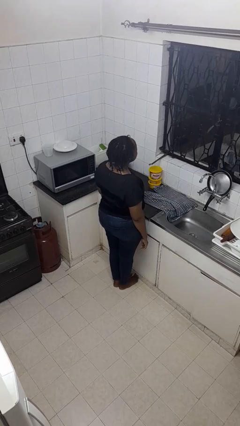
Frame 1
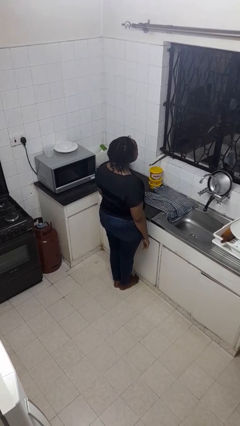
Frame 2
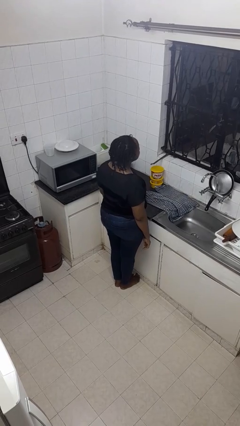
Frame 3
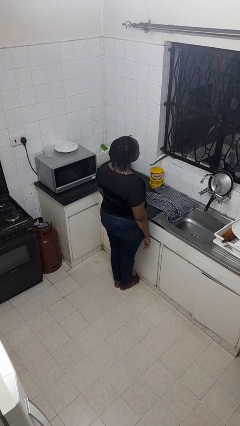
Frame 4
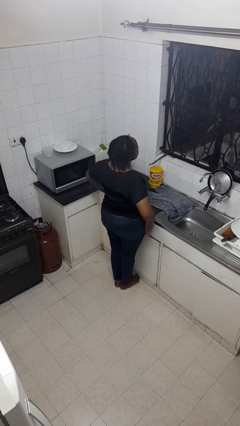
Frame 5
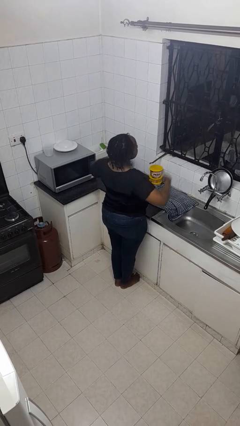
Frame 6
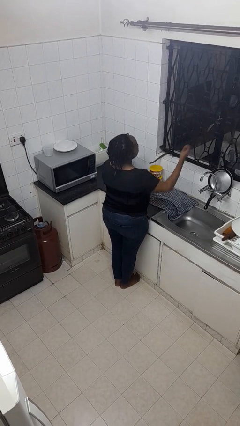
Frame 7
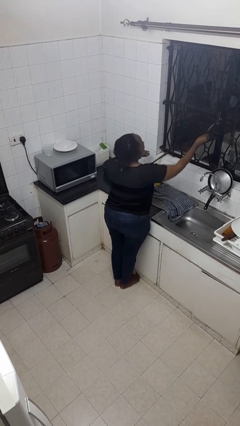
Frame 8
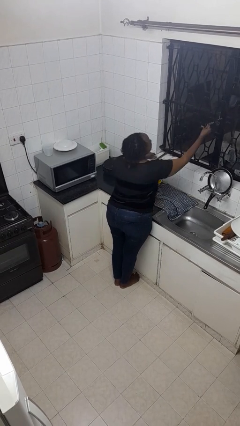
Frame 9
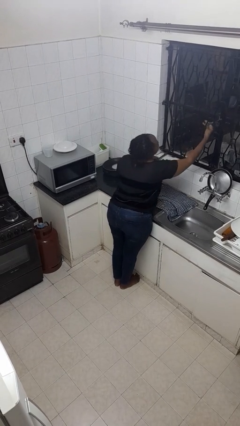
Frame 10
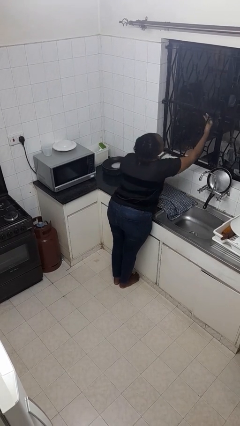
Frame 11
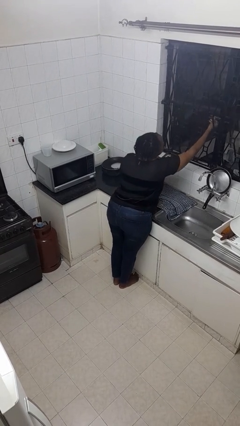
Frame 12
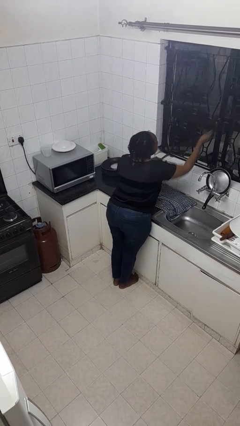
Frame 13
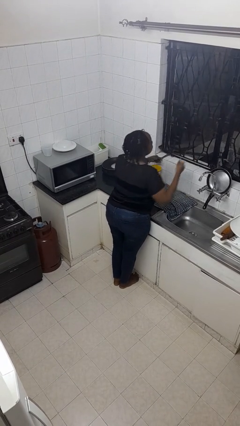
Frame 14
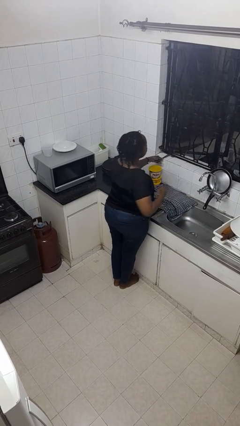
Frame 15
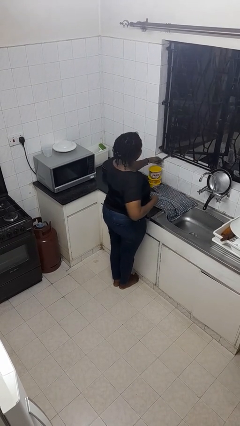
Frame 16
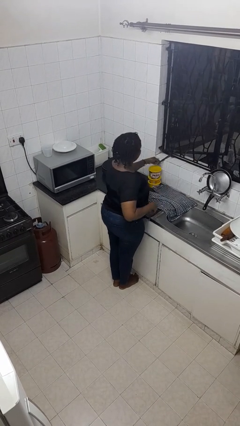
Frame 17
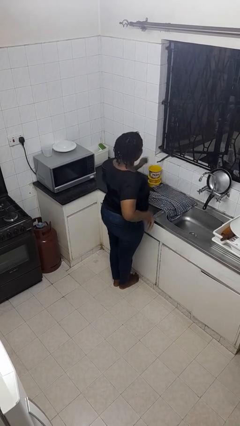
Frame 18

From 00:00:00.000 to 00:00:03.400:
person opens home window

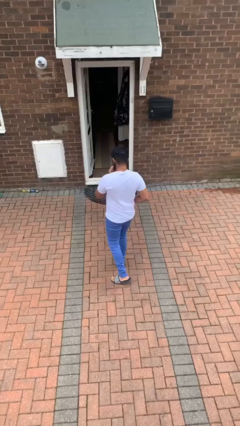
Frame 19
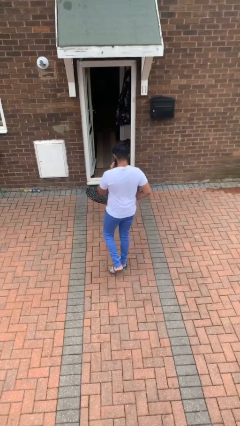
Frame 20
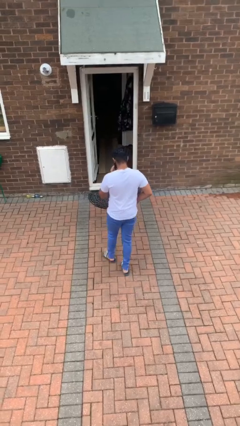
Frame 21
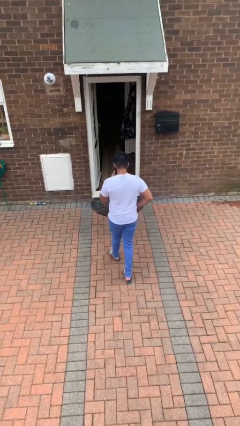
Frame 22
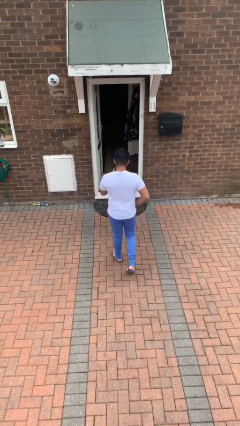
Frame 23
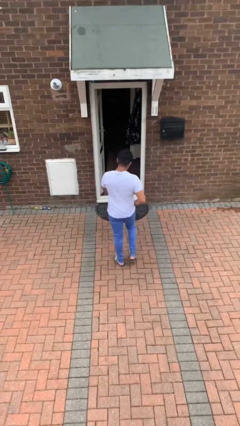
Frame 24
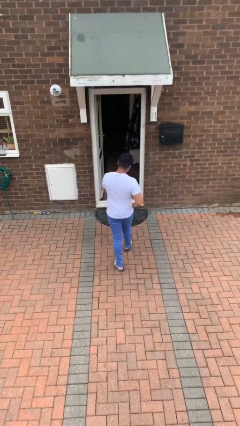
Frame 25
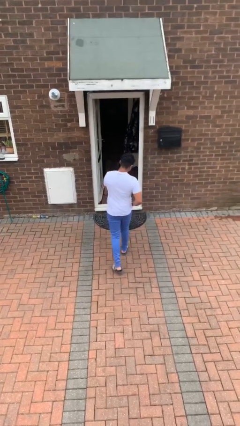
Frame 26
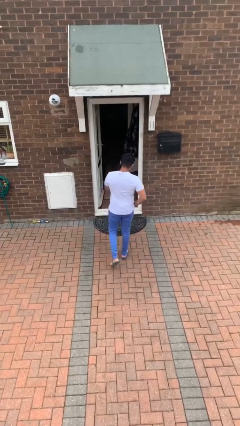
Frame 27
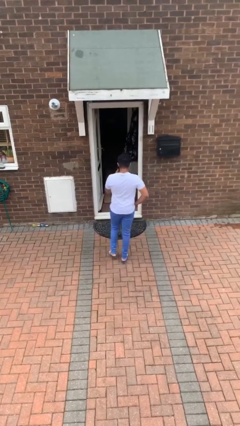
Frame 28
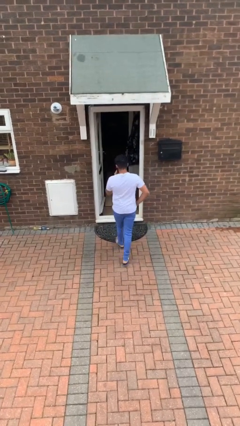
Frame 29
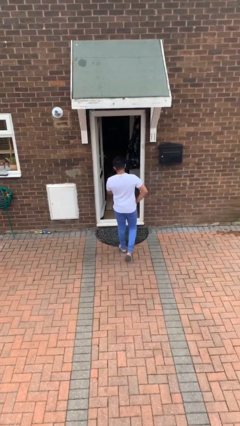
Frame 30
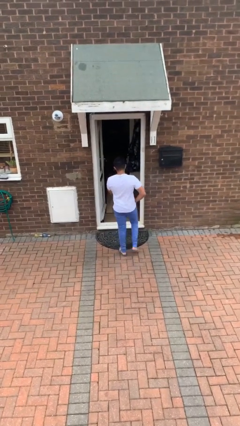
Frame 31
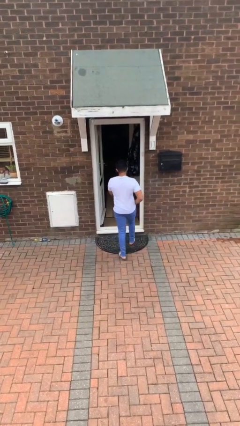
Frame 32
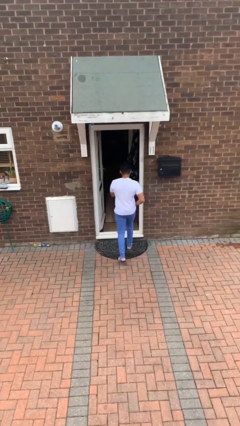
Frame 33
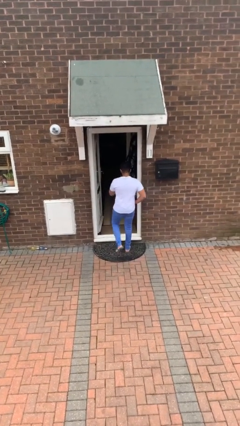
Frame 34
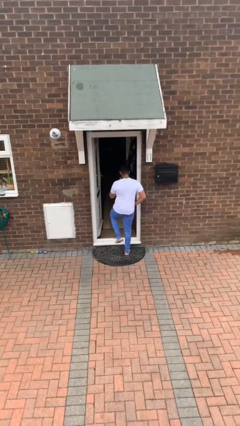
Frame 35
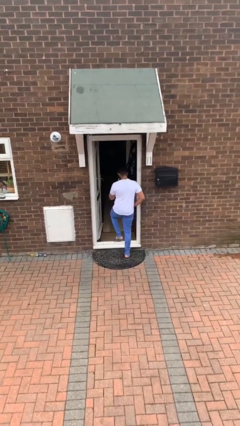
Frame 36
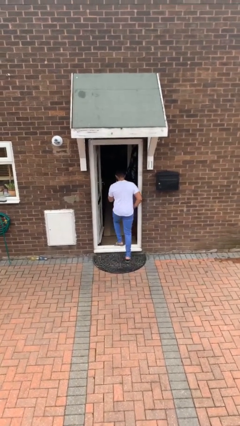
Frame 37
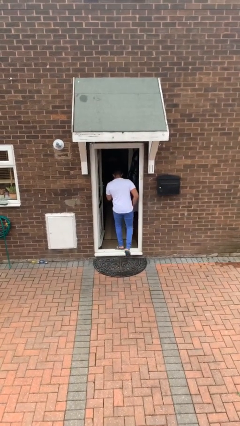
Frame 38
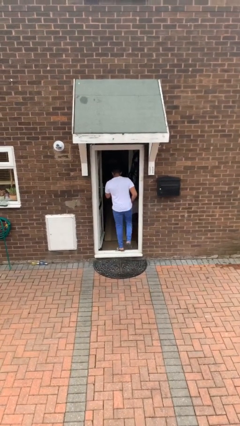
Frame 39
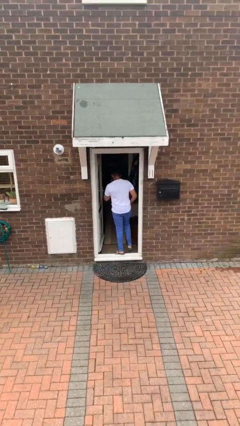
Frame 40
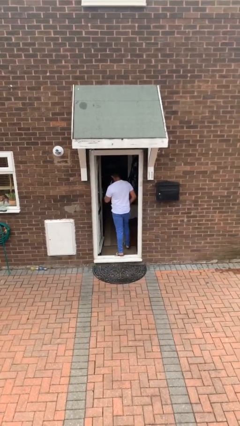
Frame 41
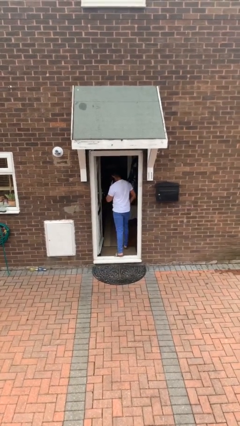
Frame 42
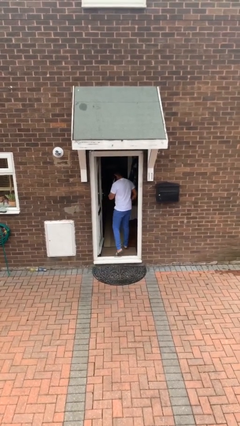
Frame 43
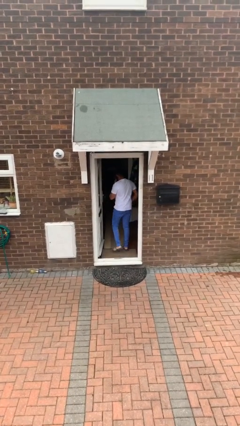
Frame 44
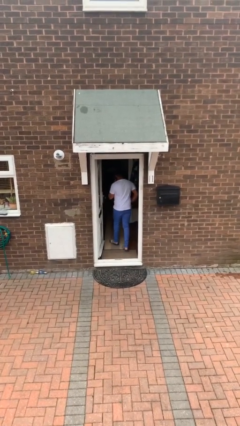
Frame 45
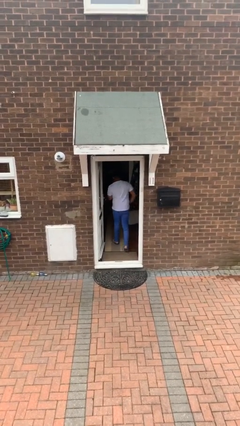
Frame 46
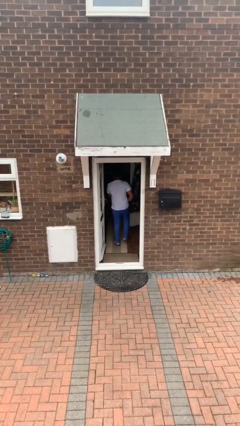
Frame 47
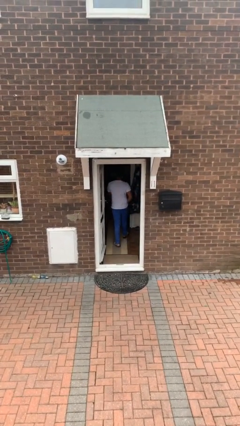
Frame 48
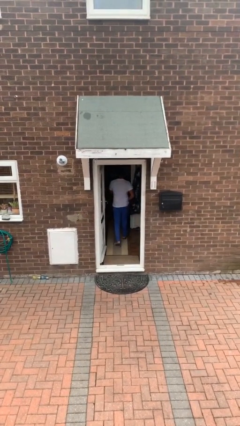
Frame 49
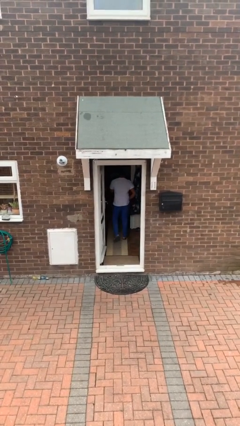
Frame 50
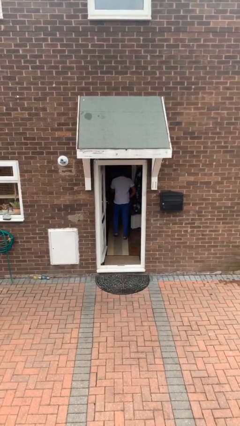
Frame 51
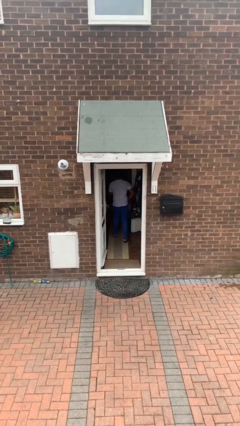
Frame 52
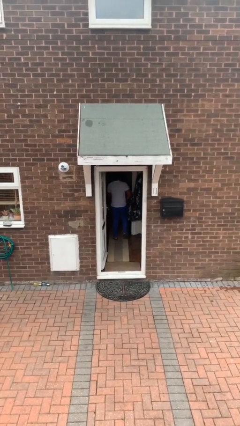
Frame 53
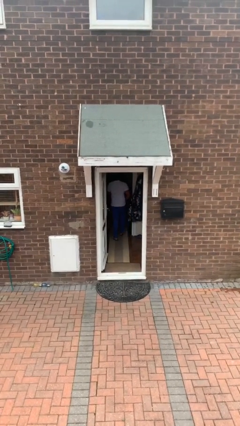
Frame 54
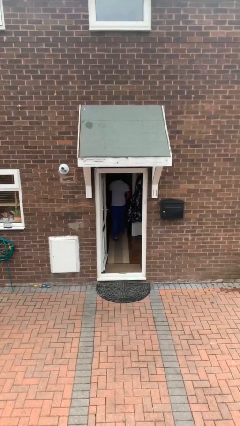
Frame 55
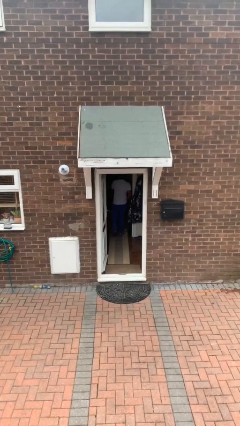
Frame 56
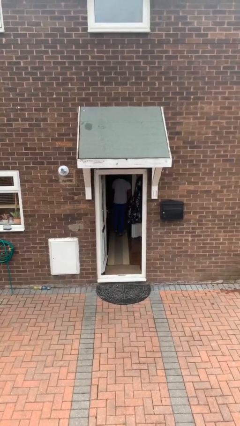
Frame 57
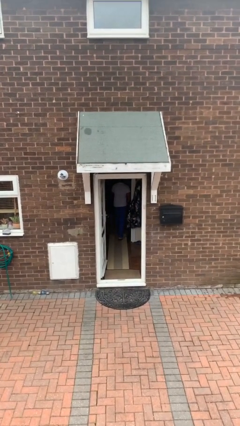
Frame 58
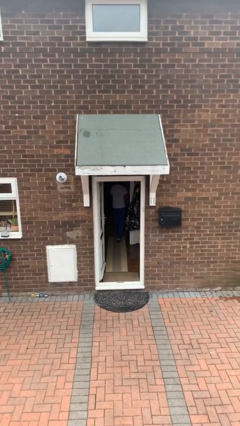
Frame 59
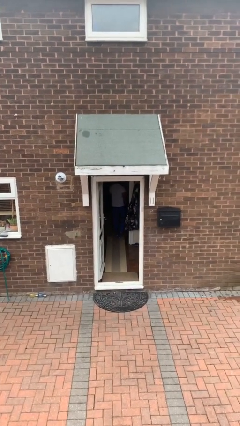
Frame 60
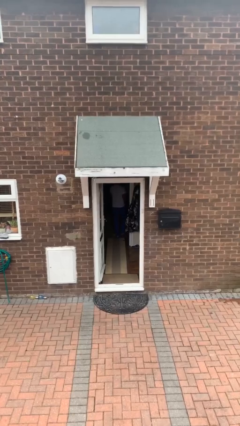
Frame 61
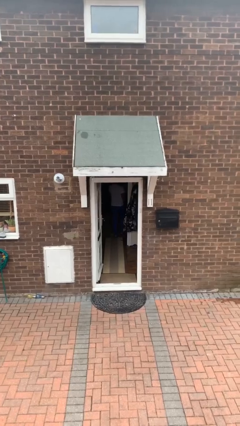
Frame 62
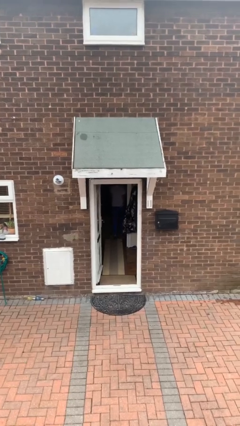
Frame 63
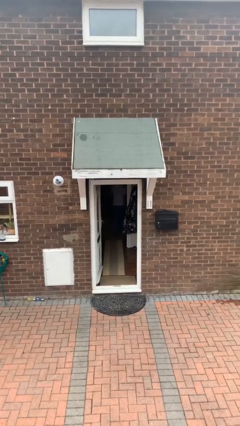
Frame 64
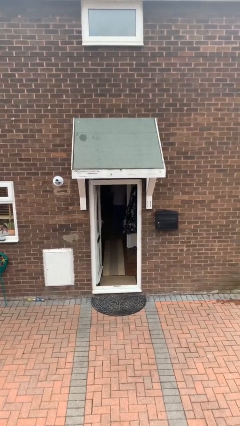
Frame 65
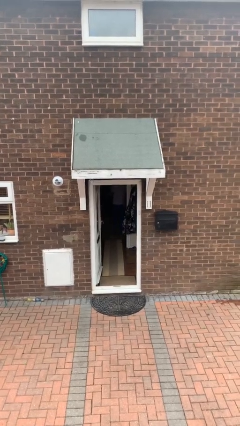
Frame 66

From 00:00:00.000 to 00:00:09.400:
person exits scene through structure

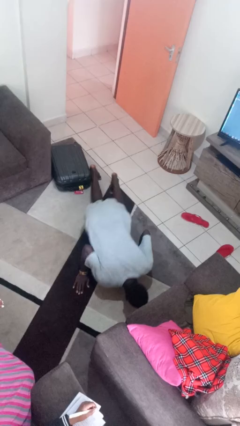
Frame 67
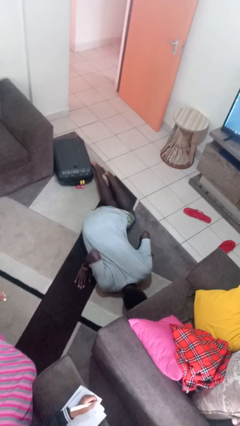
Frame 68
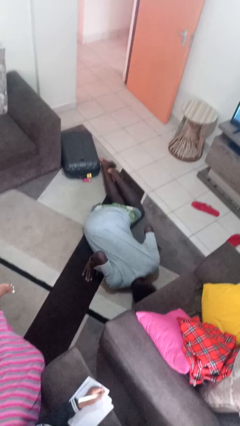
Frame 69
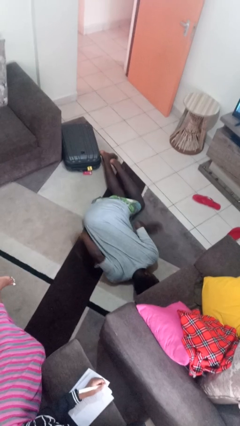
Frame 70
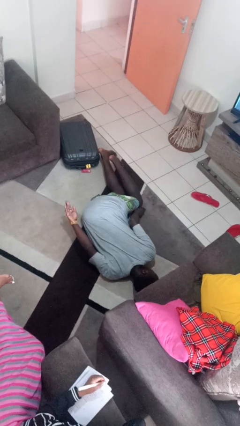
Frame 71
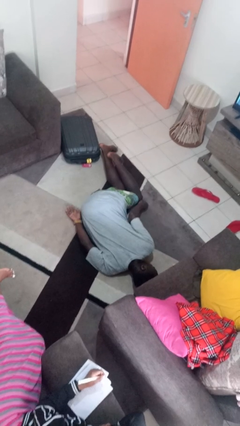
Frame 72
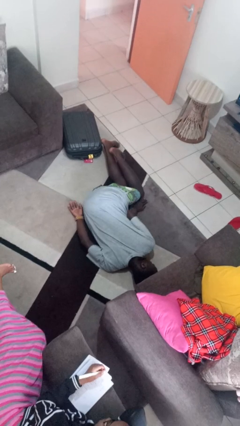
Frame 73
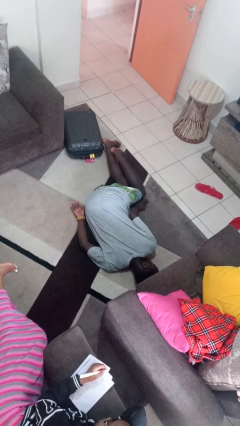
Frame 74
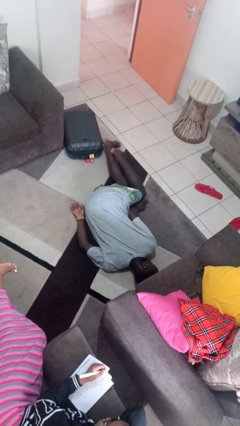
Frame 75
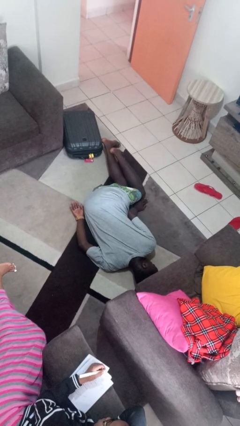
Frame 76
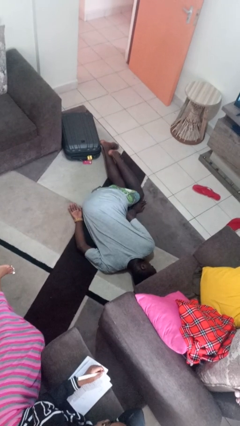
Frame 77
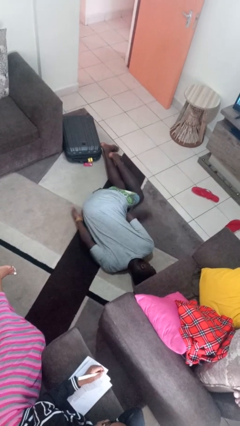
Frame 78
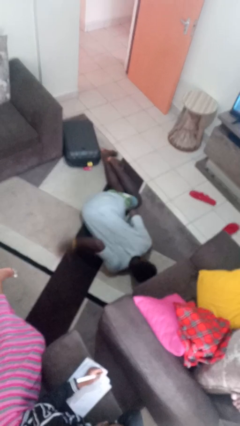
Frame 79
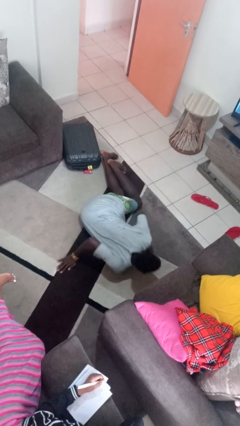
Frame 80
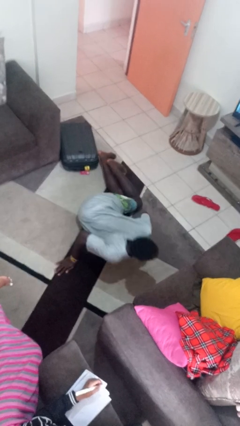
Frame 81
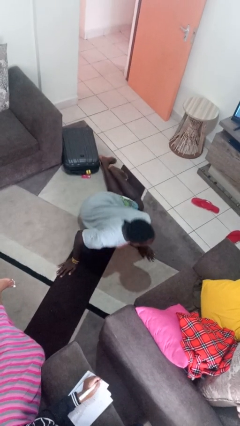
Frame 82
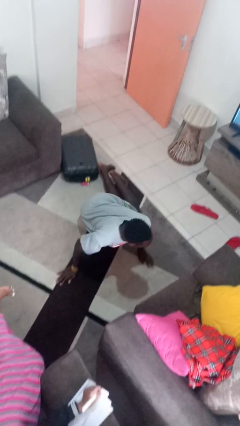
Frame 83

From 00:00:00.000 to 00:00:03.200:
person lies down on floor

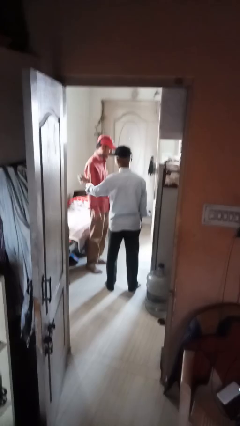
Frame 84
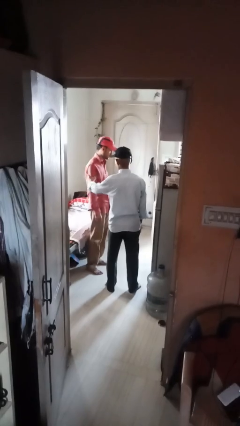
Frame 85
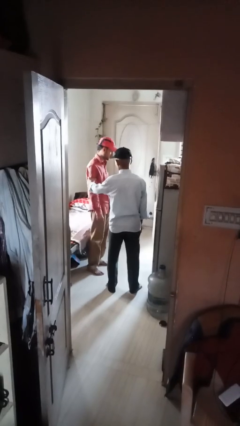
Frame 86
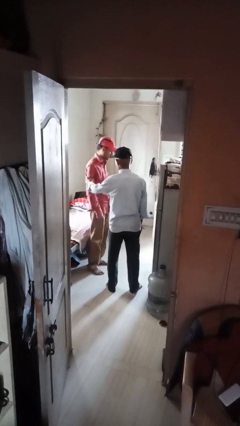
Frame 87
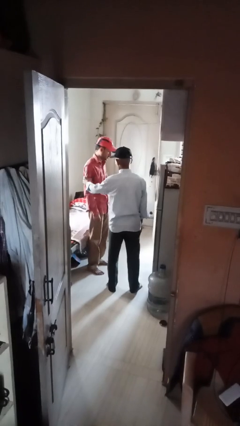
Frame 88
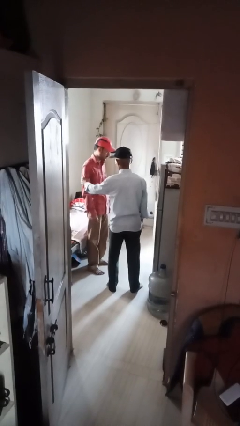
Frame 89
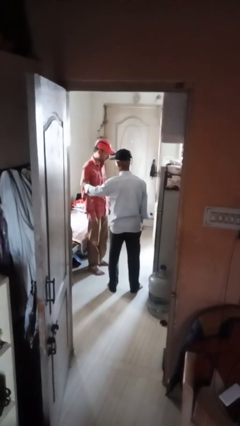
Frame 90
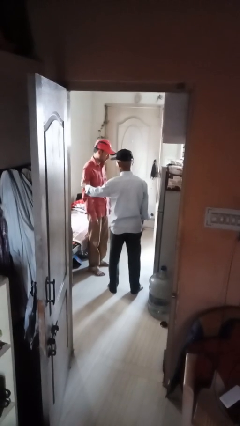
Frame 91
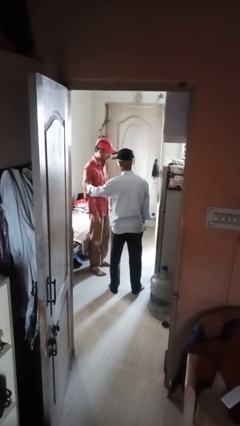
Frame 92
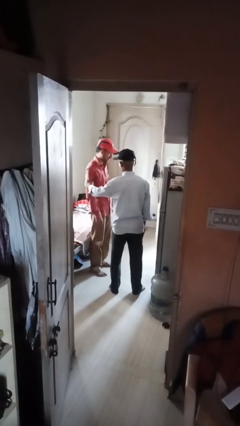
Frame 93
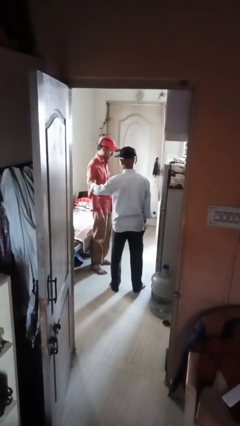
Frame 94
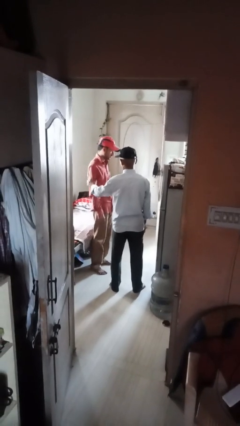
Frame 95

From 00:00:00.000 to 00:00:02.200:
person grabs person by bicep
